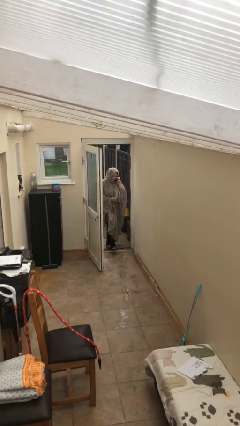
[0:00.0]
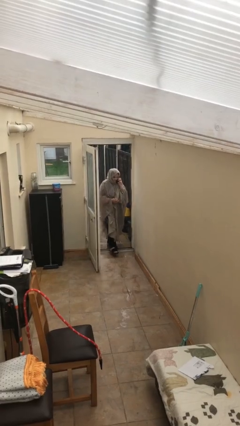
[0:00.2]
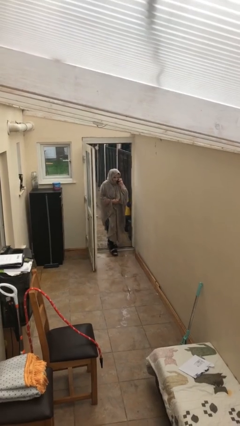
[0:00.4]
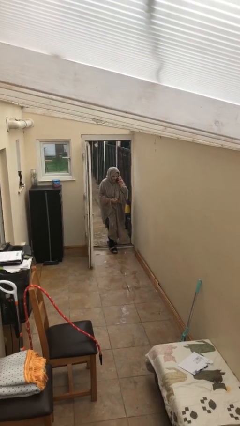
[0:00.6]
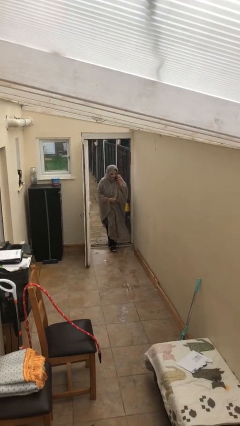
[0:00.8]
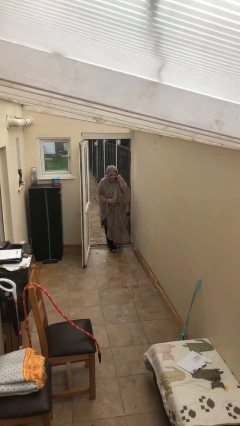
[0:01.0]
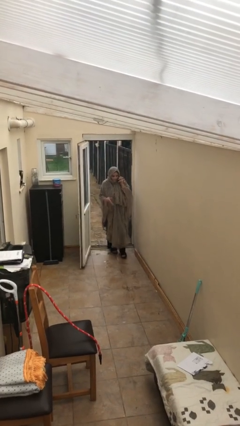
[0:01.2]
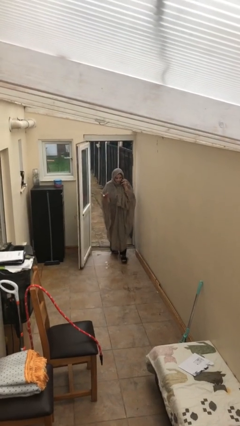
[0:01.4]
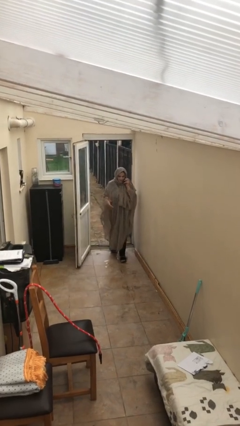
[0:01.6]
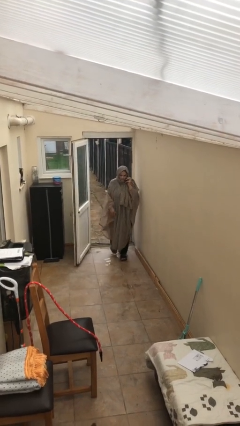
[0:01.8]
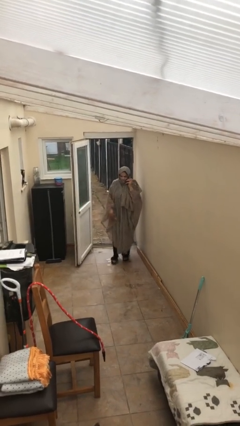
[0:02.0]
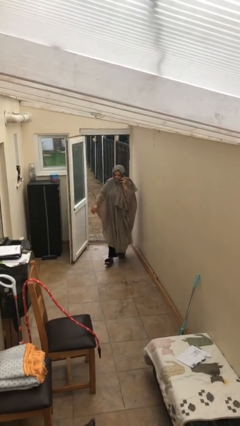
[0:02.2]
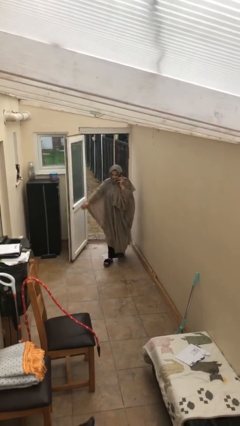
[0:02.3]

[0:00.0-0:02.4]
person enters scene through structure

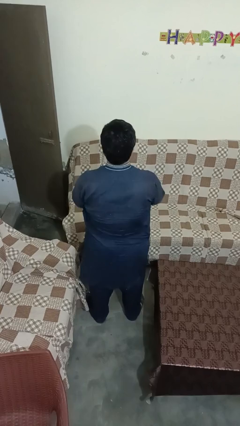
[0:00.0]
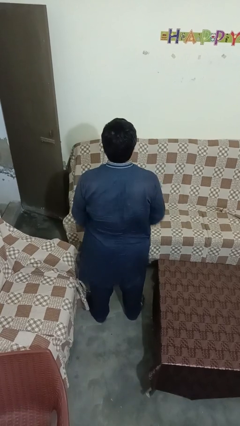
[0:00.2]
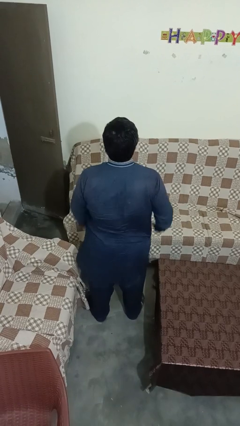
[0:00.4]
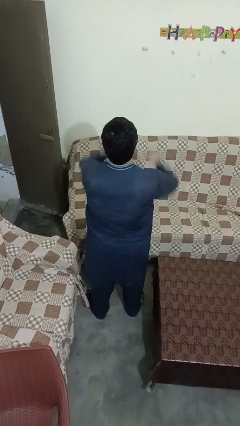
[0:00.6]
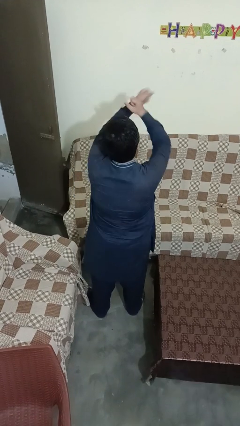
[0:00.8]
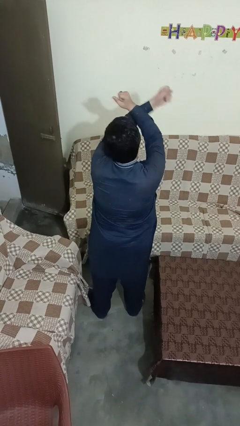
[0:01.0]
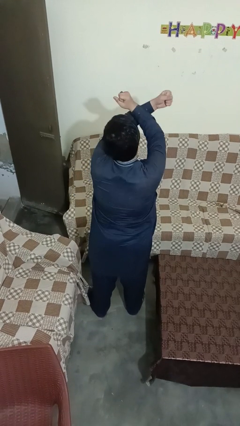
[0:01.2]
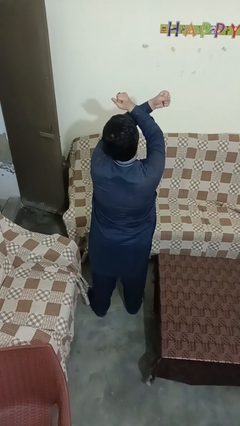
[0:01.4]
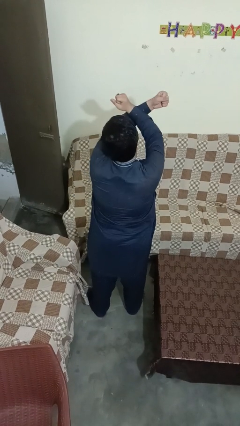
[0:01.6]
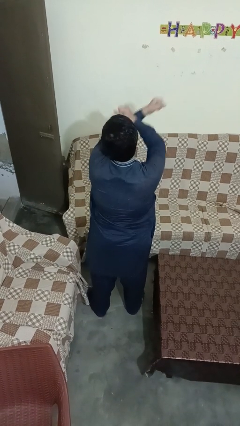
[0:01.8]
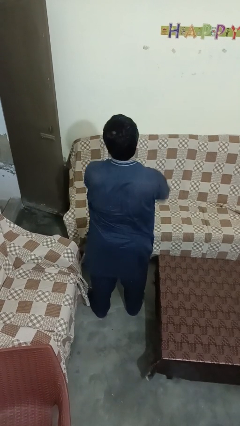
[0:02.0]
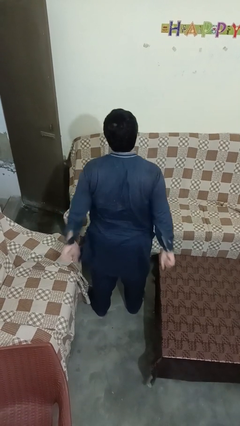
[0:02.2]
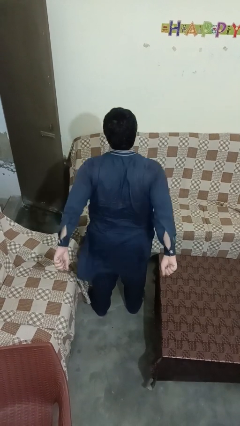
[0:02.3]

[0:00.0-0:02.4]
person gestures arms x

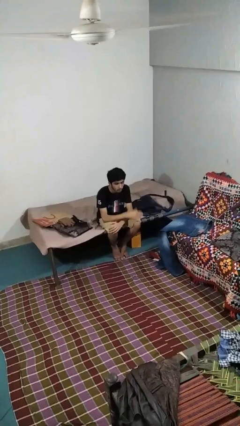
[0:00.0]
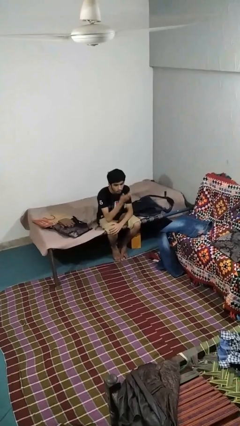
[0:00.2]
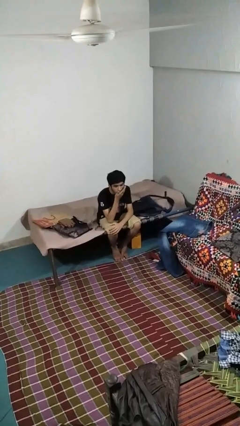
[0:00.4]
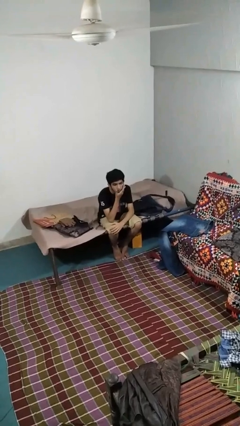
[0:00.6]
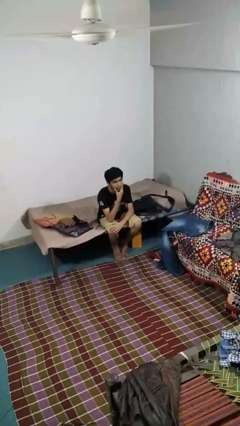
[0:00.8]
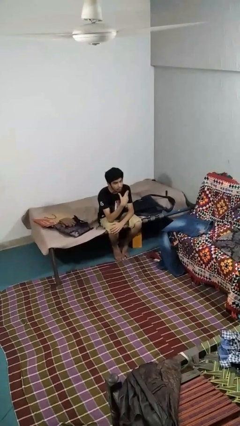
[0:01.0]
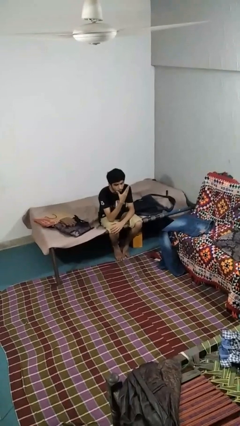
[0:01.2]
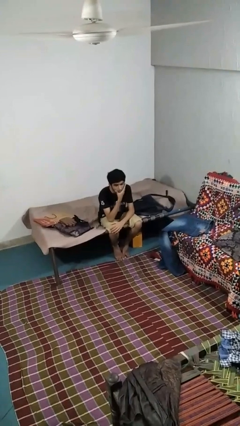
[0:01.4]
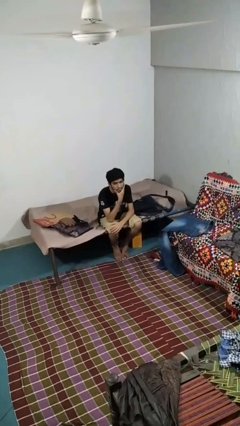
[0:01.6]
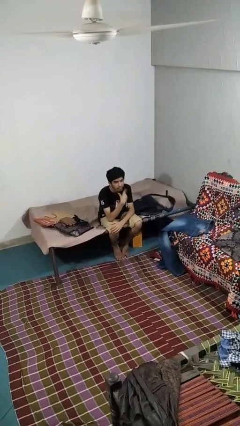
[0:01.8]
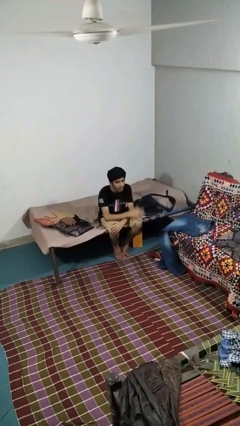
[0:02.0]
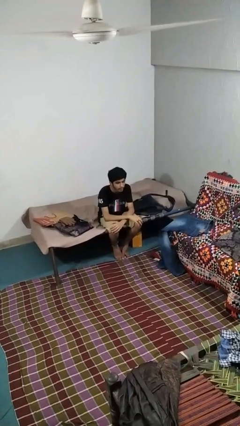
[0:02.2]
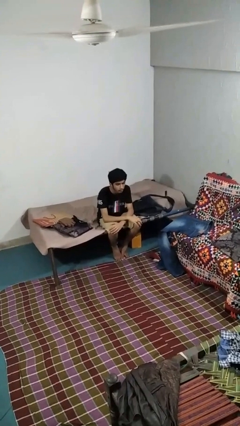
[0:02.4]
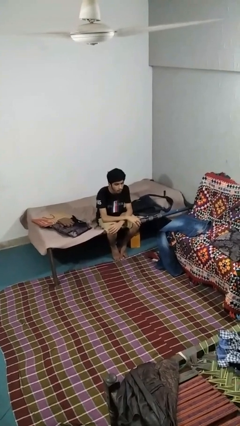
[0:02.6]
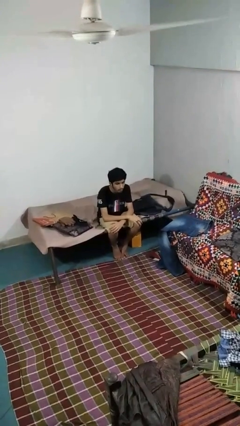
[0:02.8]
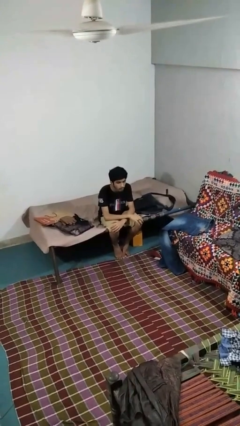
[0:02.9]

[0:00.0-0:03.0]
person strokes chin

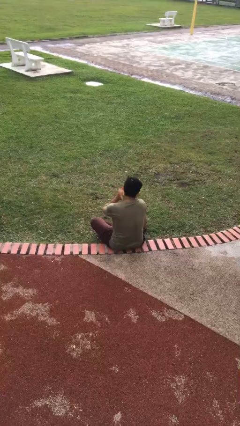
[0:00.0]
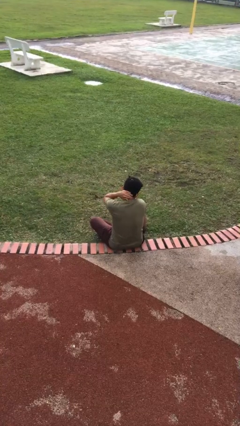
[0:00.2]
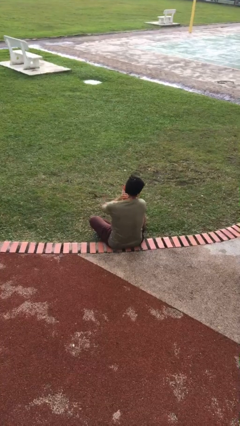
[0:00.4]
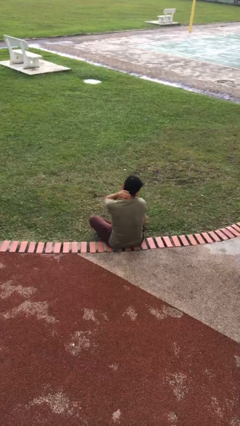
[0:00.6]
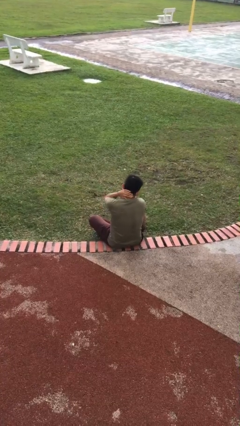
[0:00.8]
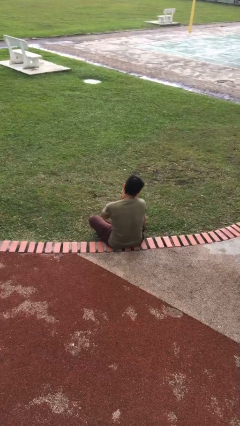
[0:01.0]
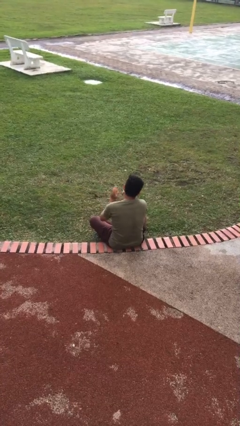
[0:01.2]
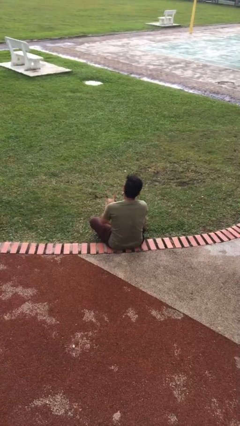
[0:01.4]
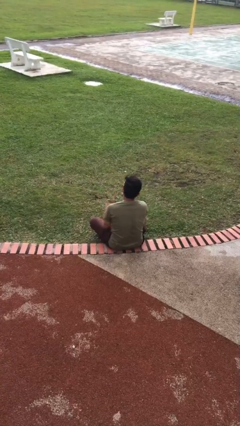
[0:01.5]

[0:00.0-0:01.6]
person rubs neck

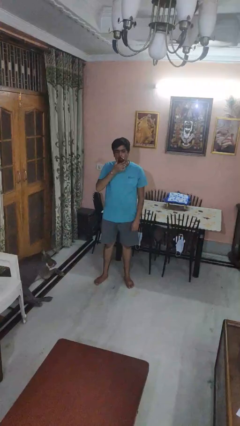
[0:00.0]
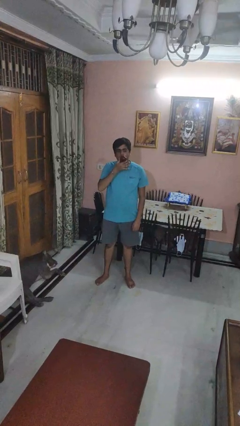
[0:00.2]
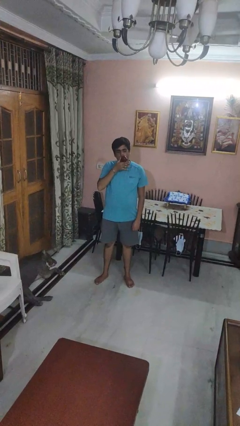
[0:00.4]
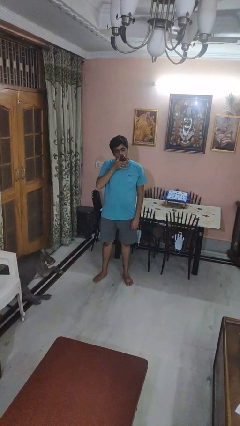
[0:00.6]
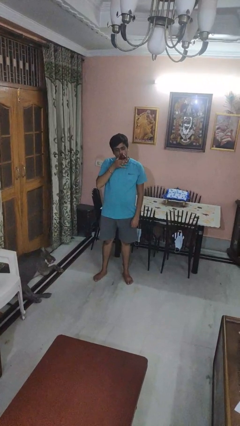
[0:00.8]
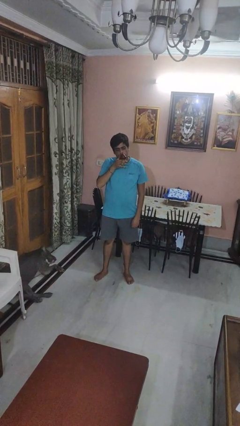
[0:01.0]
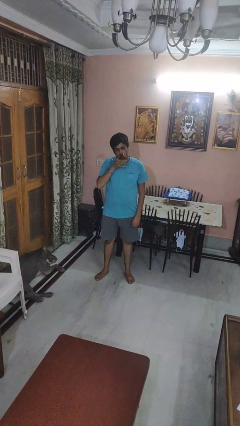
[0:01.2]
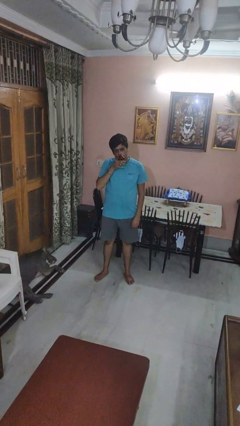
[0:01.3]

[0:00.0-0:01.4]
person eats apple

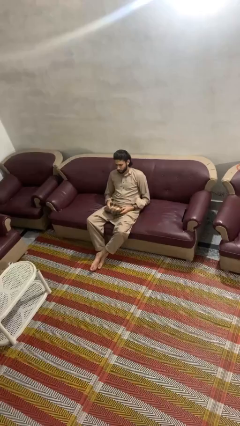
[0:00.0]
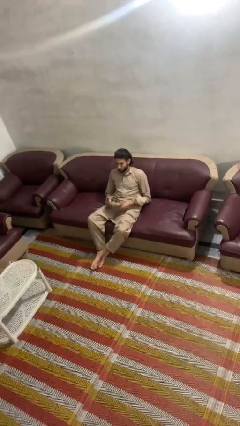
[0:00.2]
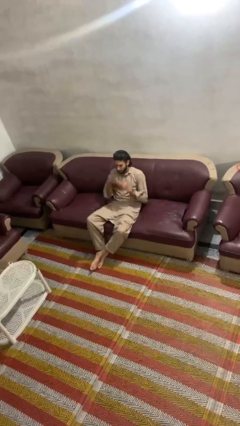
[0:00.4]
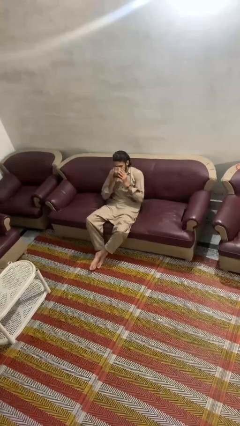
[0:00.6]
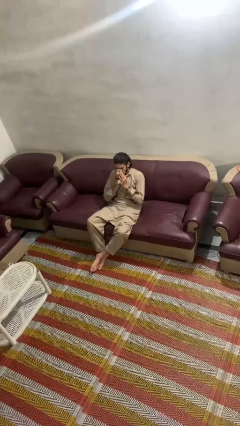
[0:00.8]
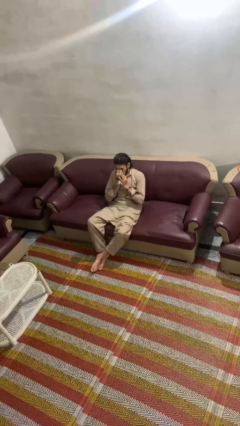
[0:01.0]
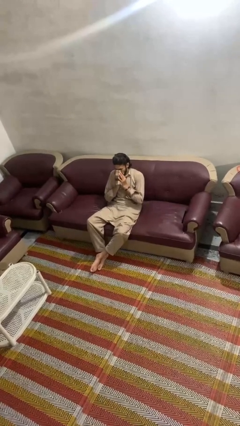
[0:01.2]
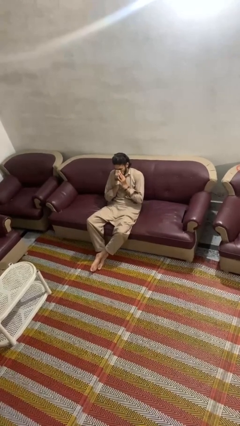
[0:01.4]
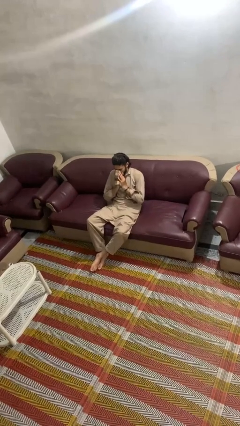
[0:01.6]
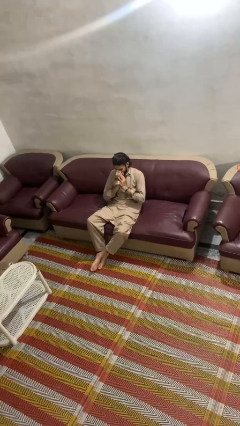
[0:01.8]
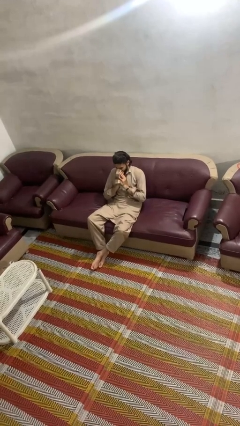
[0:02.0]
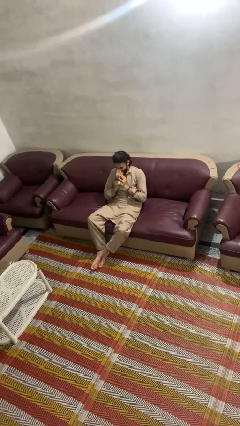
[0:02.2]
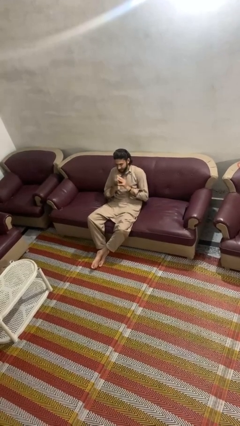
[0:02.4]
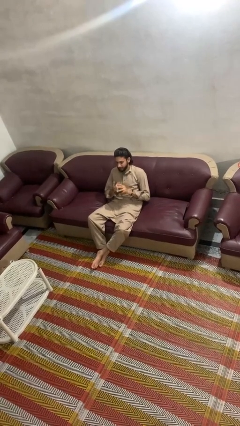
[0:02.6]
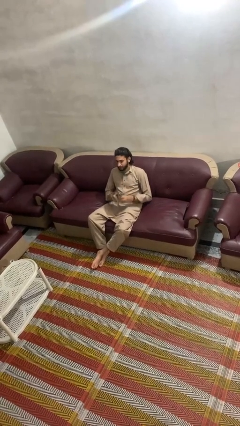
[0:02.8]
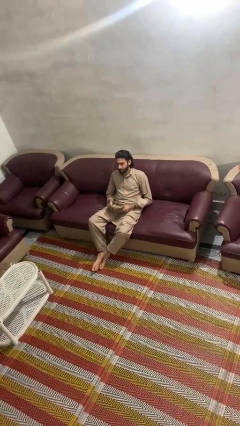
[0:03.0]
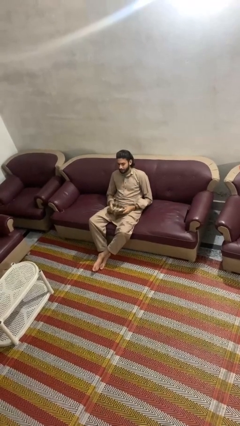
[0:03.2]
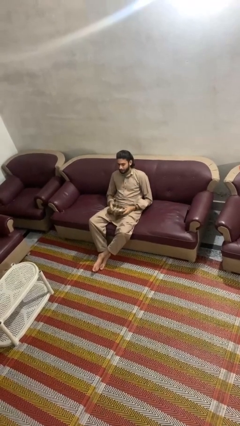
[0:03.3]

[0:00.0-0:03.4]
person blows nose

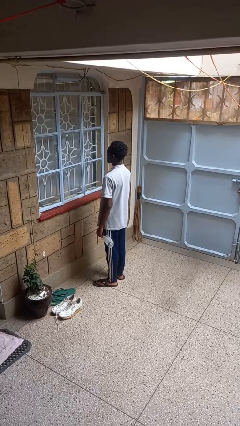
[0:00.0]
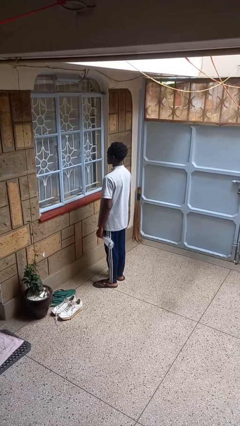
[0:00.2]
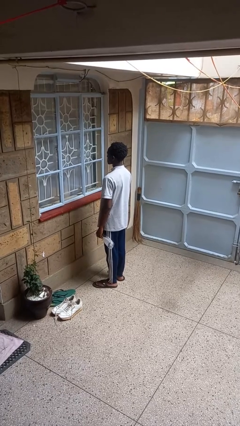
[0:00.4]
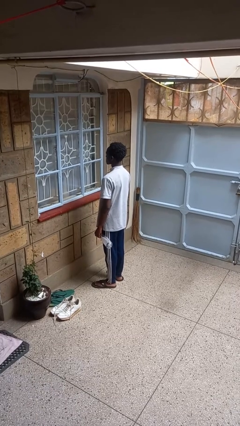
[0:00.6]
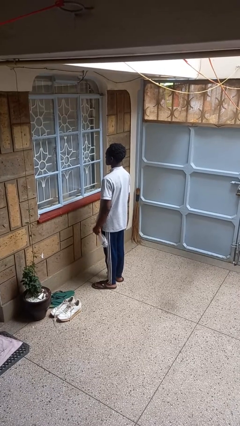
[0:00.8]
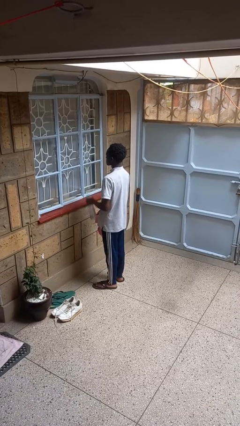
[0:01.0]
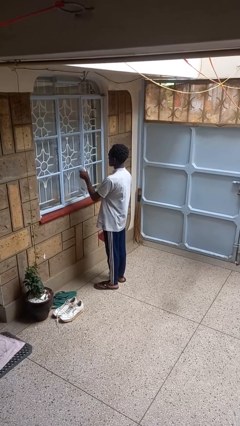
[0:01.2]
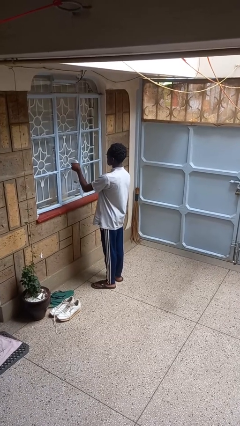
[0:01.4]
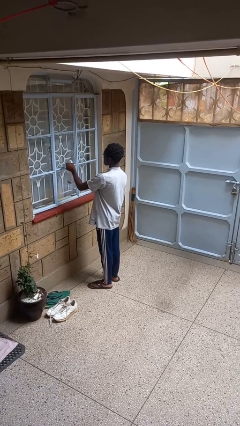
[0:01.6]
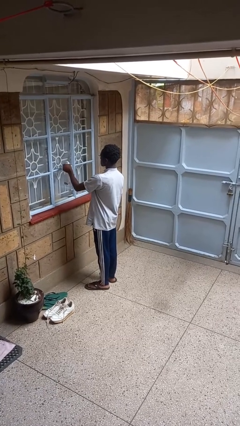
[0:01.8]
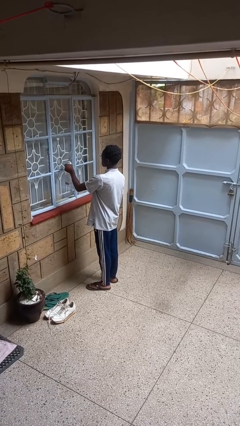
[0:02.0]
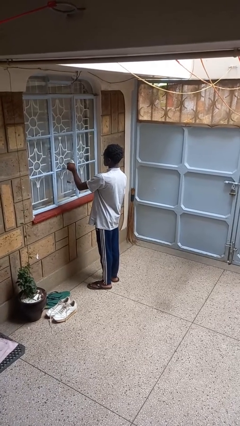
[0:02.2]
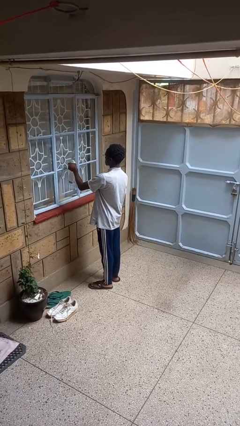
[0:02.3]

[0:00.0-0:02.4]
person sprays from bottle

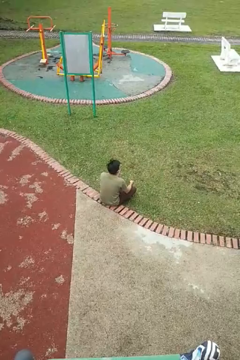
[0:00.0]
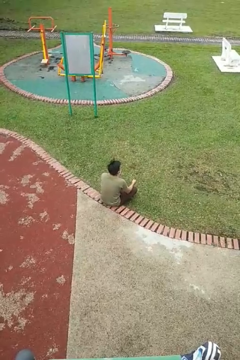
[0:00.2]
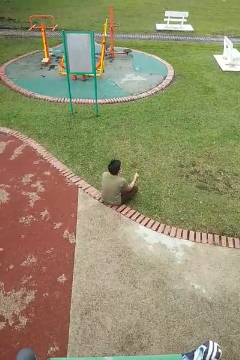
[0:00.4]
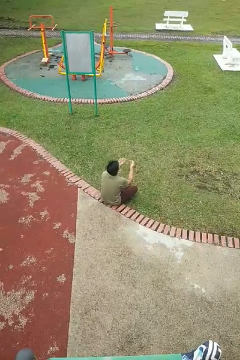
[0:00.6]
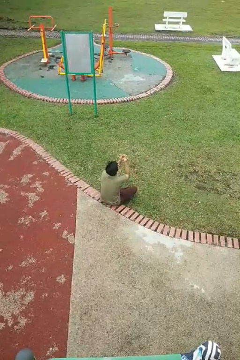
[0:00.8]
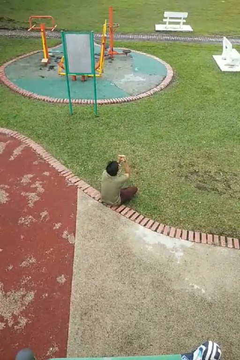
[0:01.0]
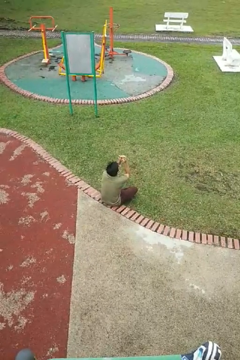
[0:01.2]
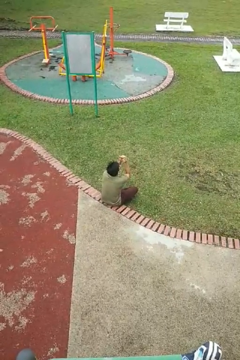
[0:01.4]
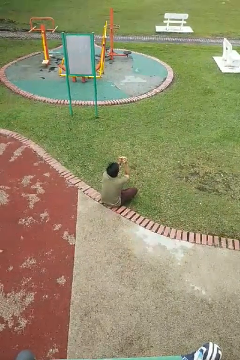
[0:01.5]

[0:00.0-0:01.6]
person prays
